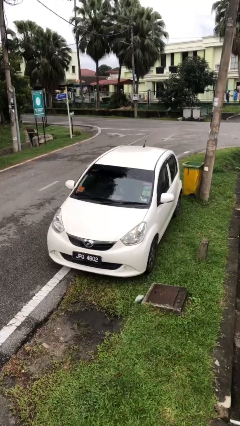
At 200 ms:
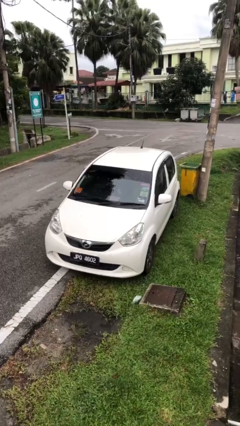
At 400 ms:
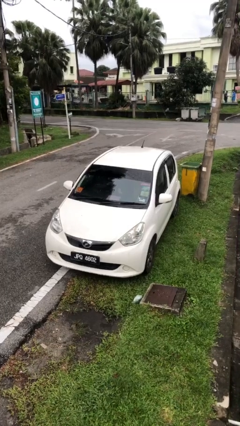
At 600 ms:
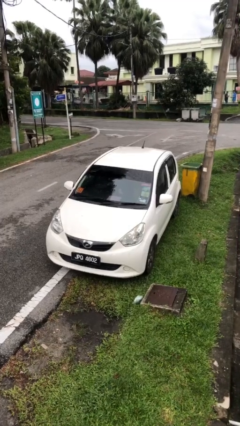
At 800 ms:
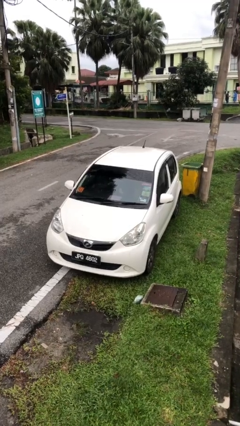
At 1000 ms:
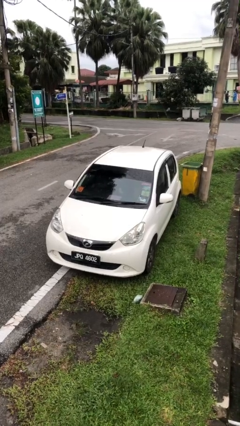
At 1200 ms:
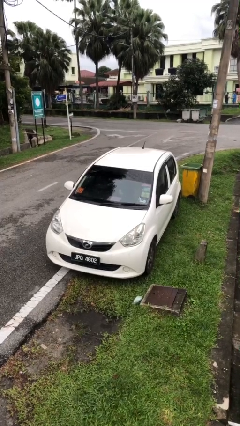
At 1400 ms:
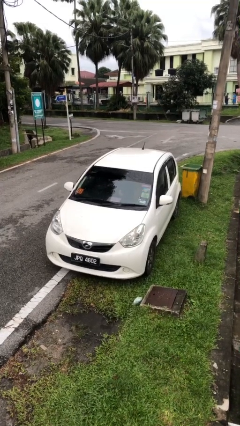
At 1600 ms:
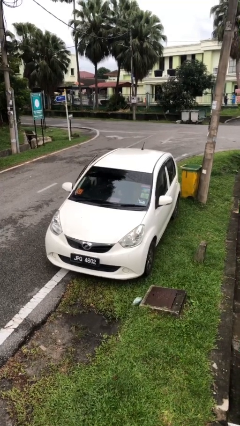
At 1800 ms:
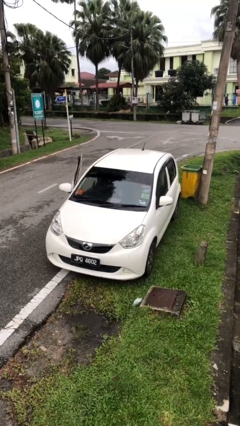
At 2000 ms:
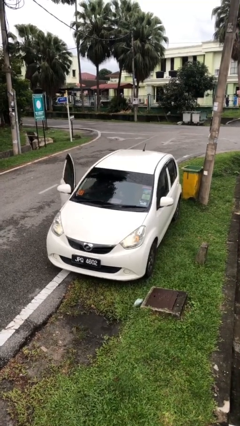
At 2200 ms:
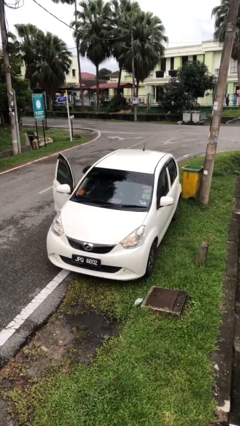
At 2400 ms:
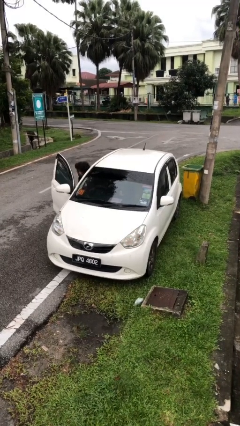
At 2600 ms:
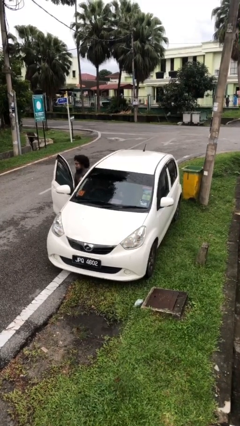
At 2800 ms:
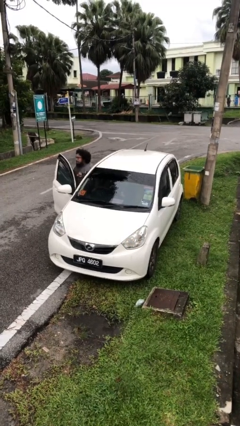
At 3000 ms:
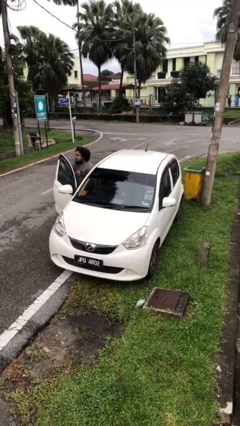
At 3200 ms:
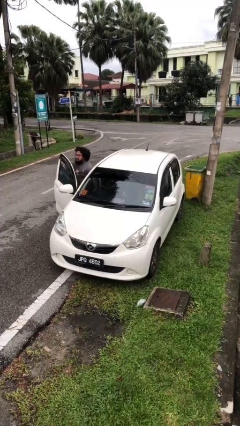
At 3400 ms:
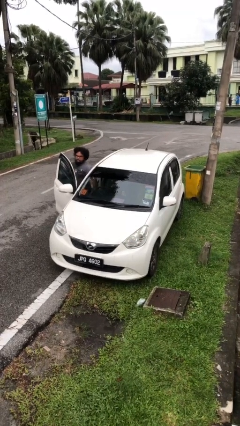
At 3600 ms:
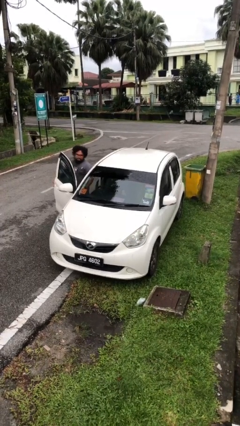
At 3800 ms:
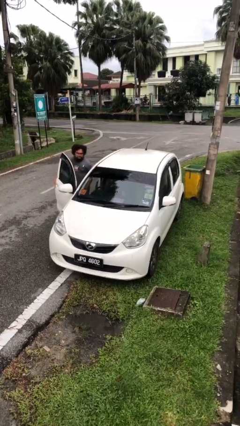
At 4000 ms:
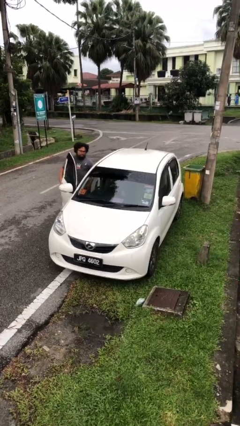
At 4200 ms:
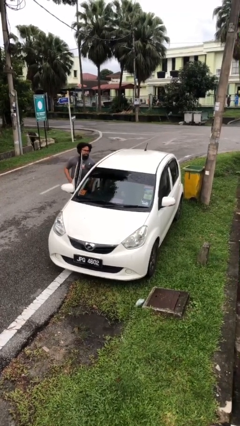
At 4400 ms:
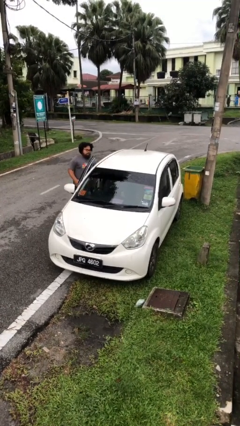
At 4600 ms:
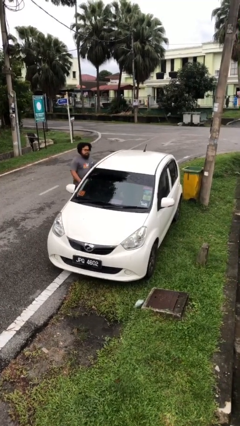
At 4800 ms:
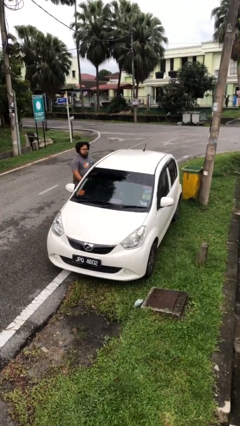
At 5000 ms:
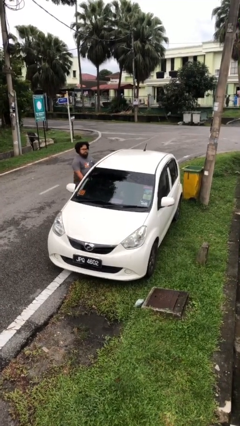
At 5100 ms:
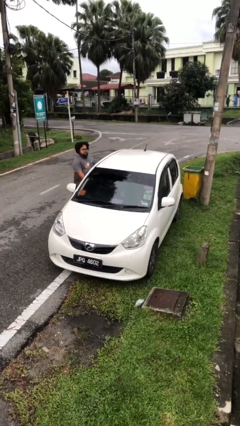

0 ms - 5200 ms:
car drops off person

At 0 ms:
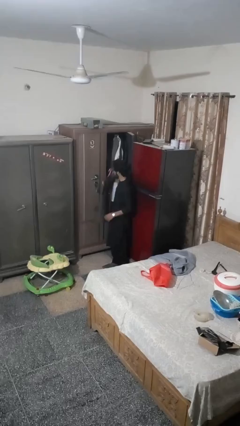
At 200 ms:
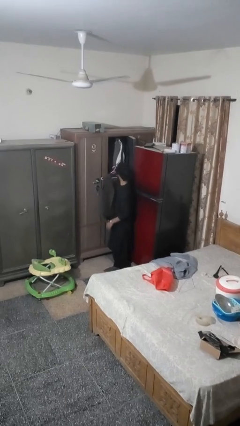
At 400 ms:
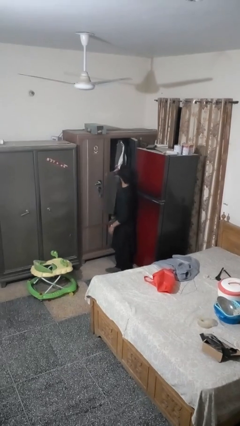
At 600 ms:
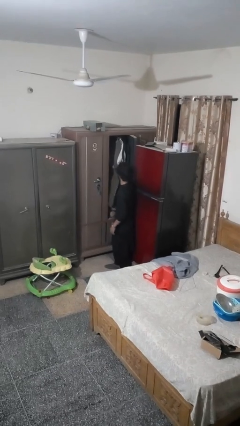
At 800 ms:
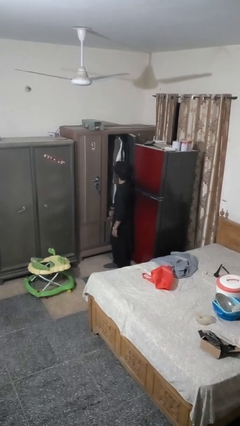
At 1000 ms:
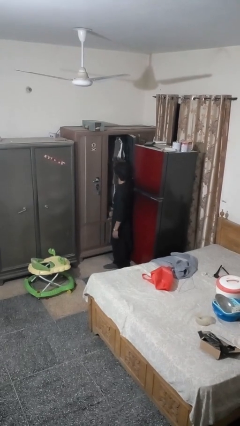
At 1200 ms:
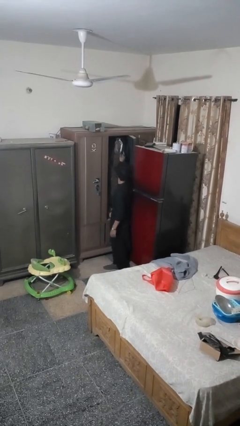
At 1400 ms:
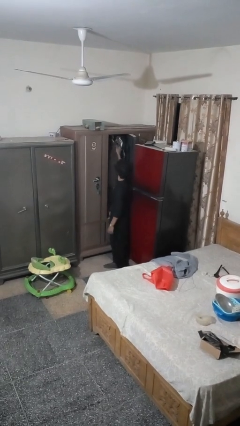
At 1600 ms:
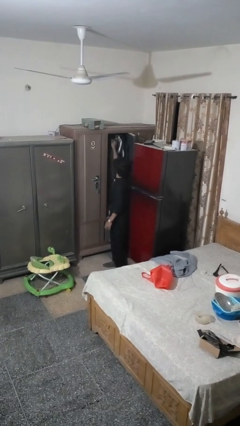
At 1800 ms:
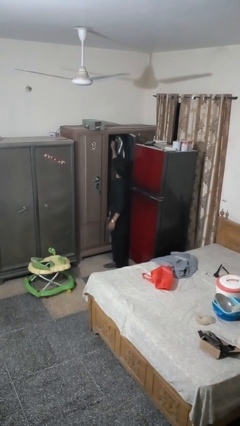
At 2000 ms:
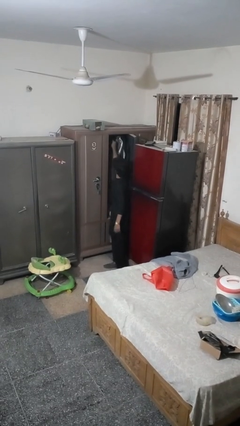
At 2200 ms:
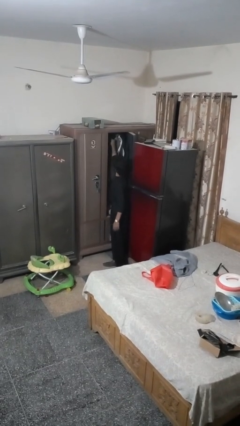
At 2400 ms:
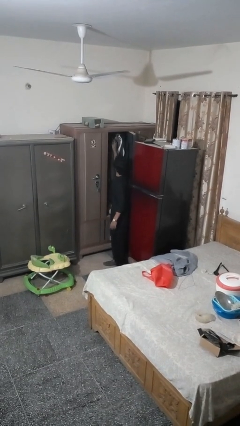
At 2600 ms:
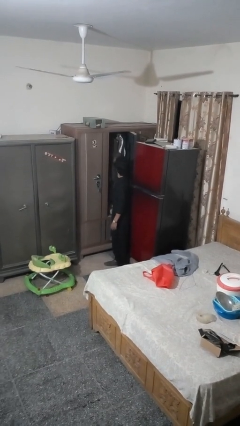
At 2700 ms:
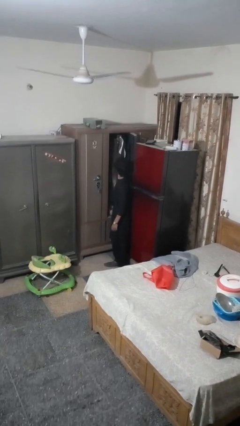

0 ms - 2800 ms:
person puts clothes into closet

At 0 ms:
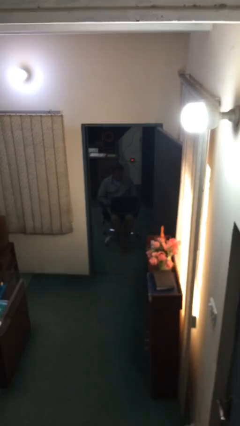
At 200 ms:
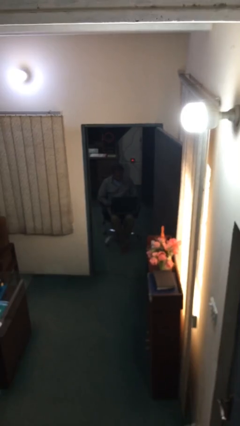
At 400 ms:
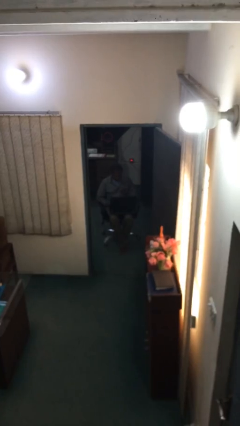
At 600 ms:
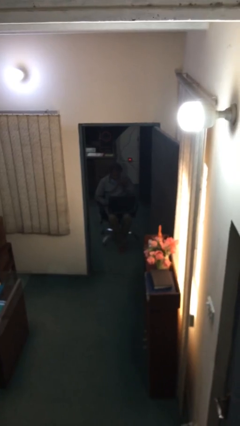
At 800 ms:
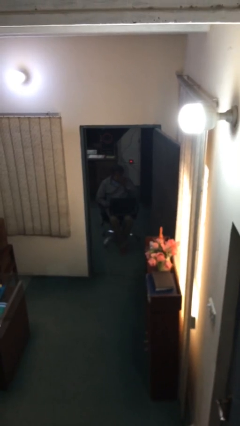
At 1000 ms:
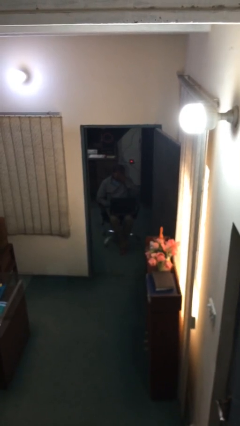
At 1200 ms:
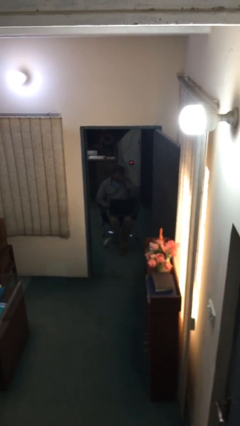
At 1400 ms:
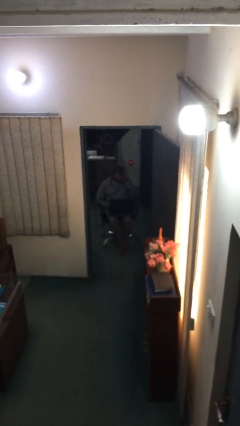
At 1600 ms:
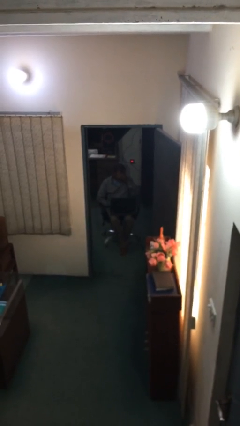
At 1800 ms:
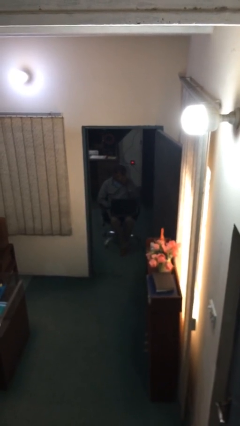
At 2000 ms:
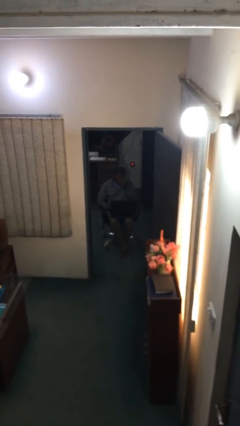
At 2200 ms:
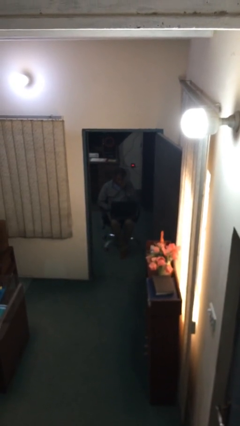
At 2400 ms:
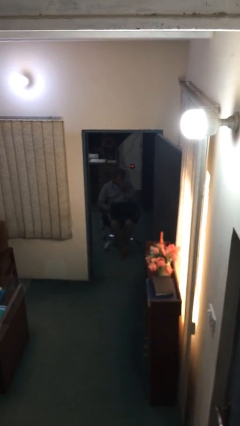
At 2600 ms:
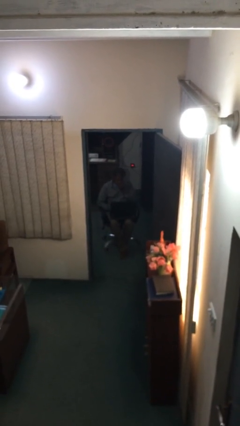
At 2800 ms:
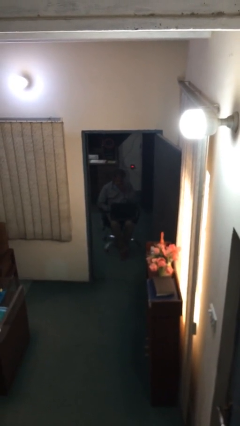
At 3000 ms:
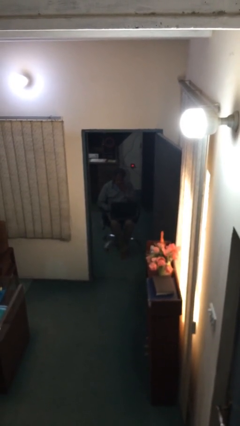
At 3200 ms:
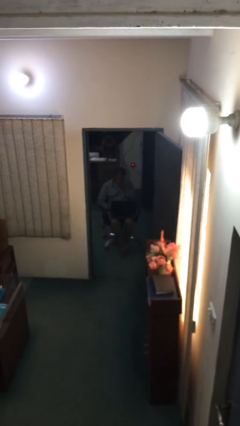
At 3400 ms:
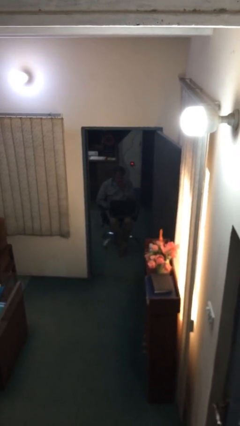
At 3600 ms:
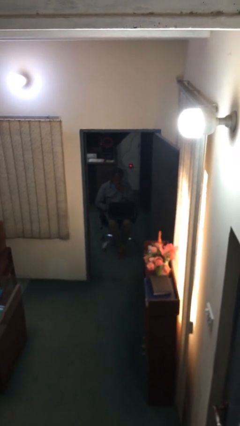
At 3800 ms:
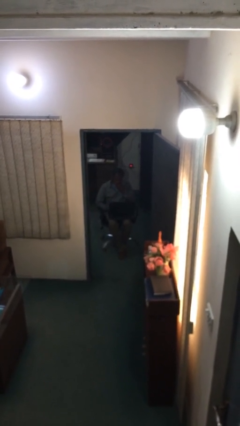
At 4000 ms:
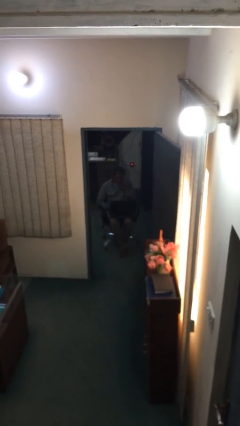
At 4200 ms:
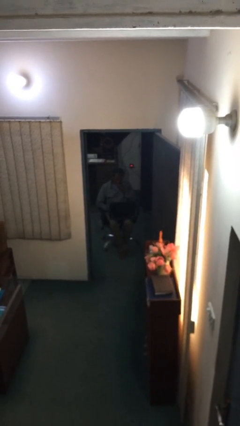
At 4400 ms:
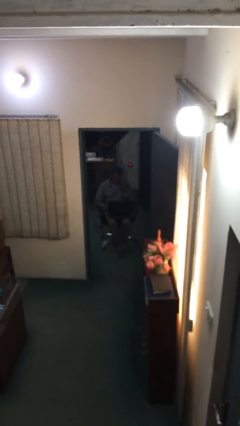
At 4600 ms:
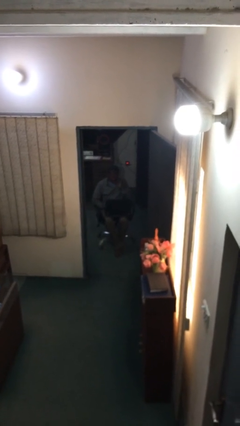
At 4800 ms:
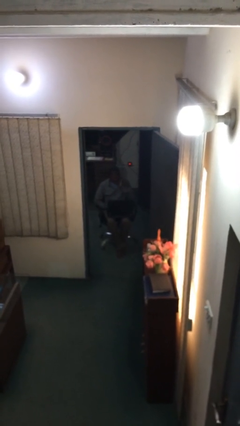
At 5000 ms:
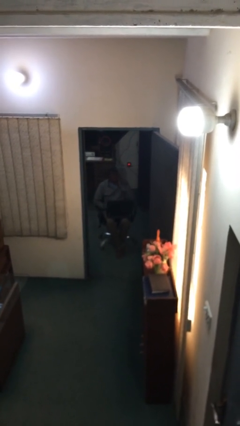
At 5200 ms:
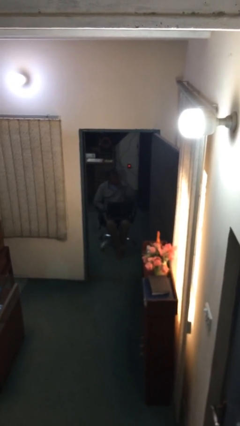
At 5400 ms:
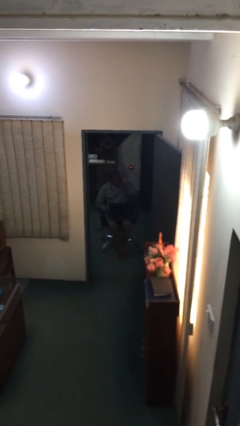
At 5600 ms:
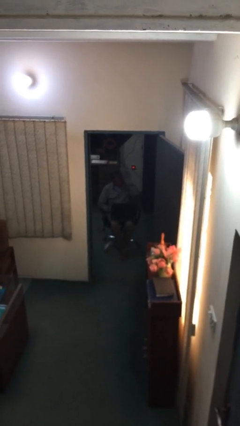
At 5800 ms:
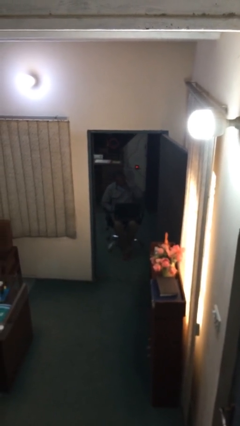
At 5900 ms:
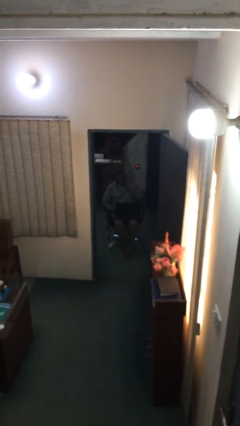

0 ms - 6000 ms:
person interacts with laptop

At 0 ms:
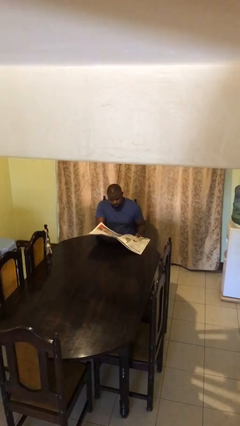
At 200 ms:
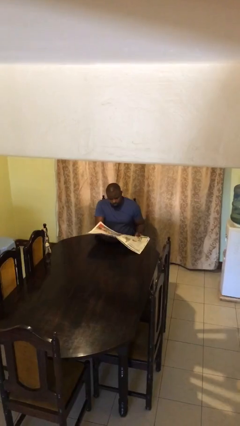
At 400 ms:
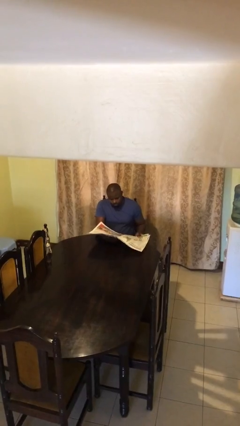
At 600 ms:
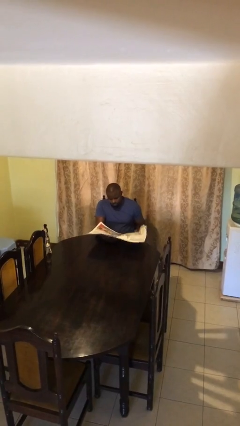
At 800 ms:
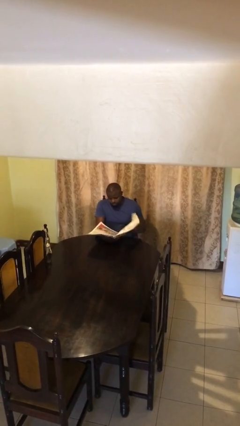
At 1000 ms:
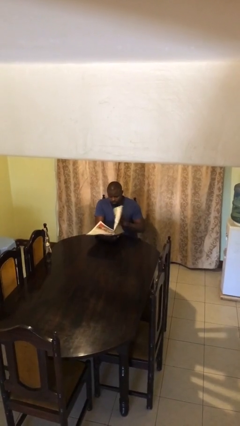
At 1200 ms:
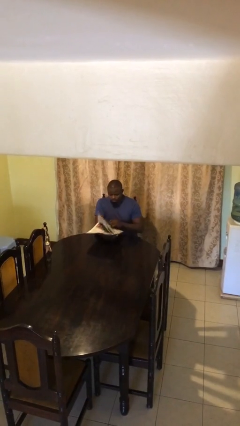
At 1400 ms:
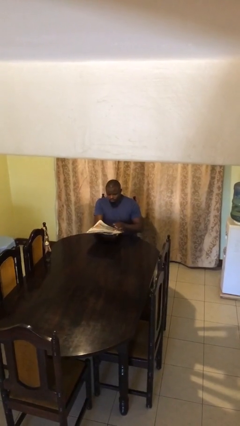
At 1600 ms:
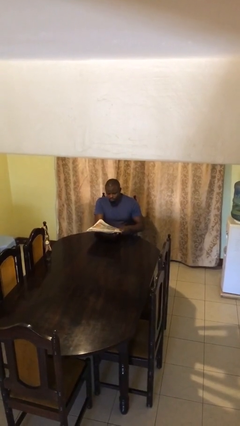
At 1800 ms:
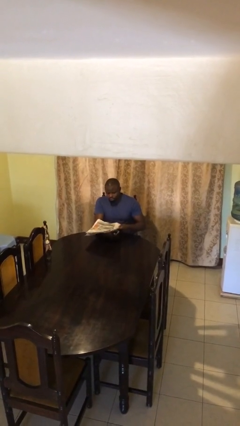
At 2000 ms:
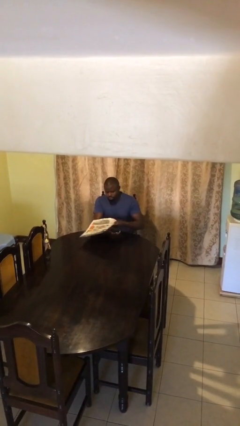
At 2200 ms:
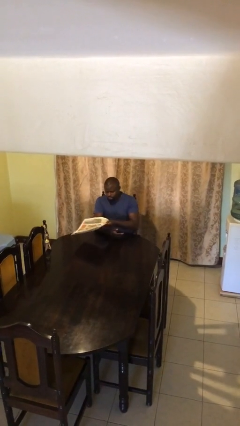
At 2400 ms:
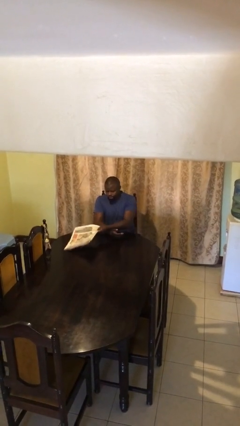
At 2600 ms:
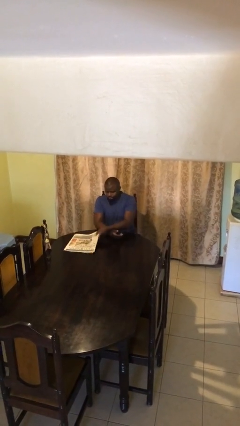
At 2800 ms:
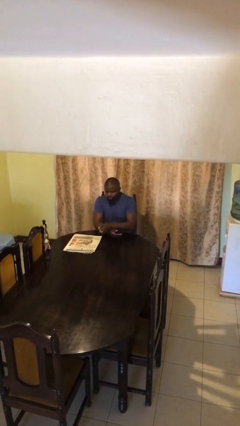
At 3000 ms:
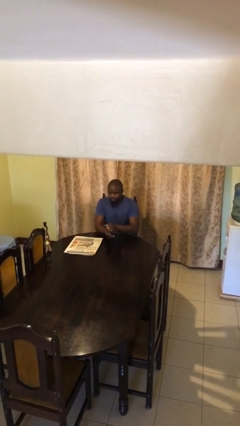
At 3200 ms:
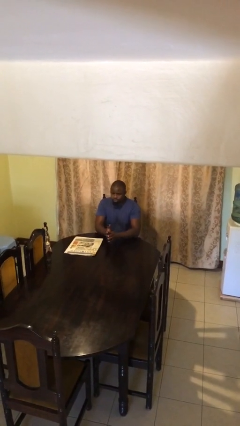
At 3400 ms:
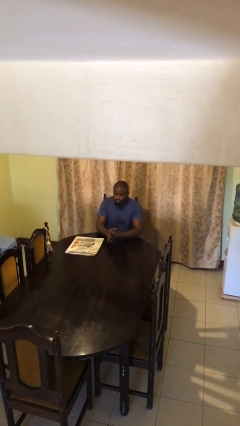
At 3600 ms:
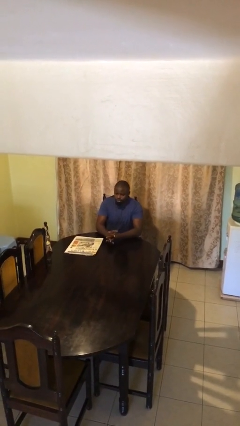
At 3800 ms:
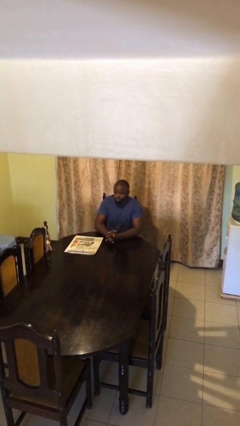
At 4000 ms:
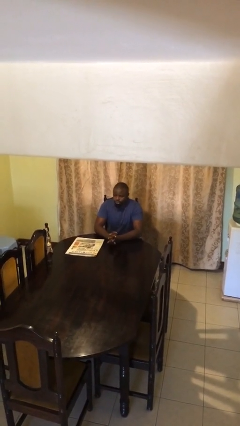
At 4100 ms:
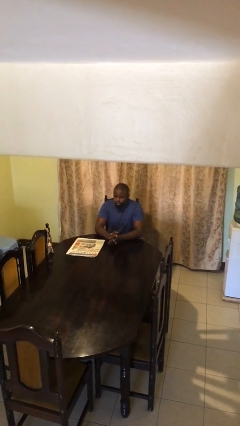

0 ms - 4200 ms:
person puts down object on table
